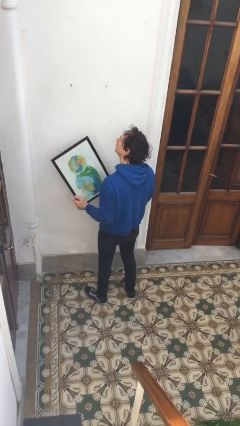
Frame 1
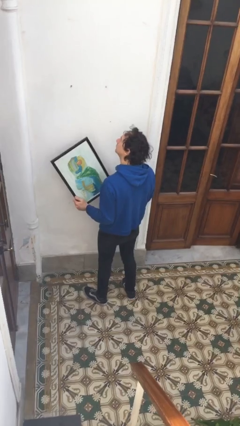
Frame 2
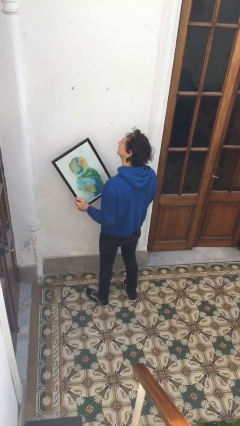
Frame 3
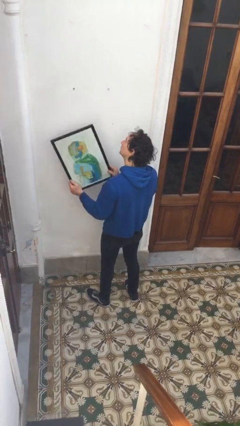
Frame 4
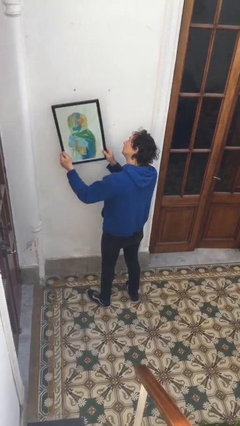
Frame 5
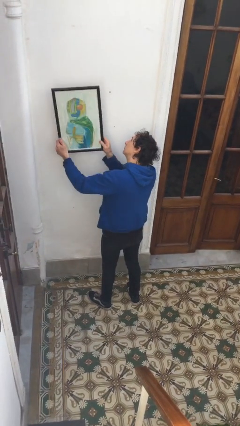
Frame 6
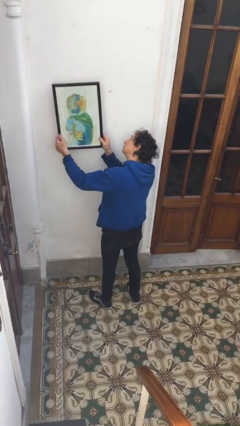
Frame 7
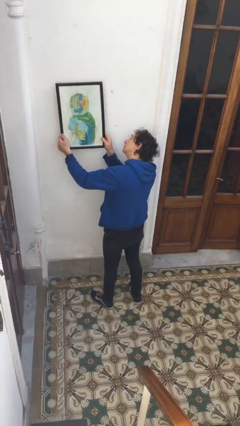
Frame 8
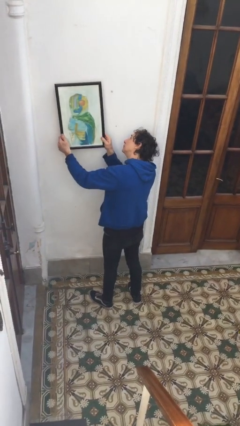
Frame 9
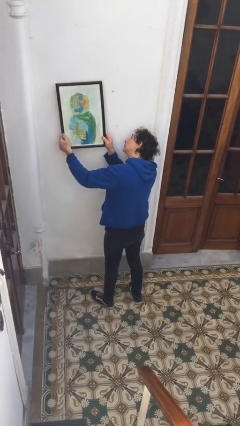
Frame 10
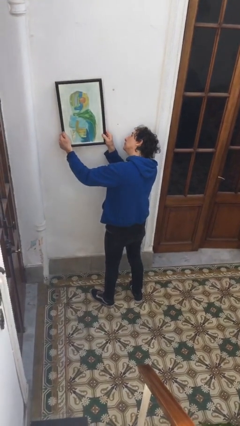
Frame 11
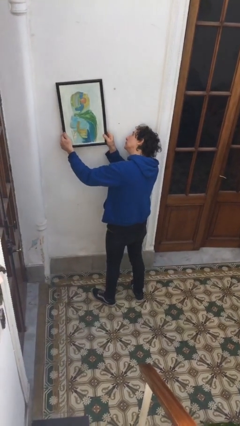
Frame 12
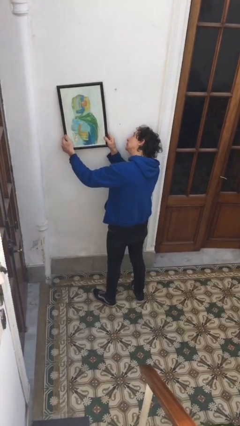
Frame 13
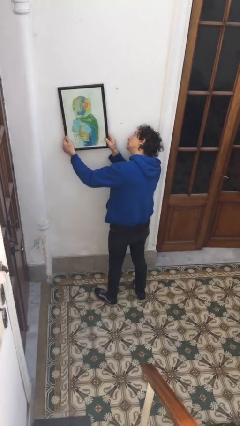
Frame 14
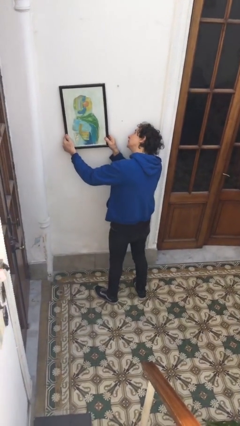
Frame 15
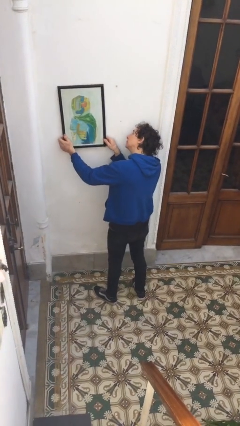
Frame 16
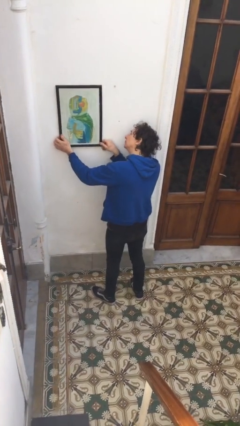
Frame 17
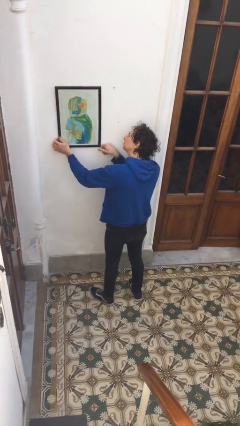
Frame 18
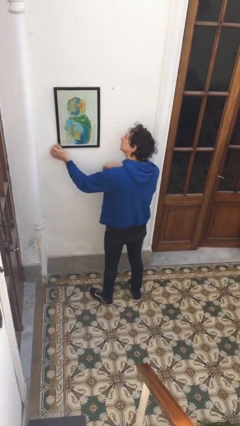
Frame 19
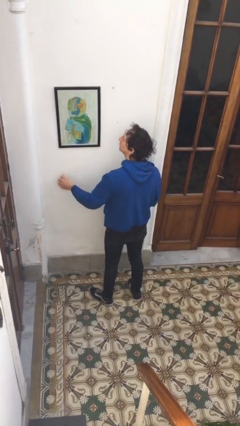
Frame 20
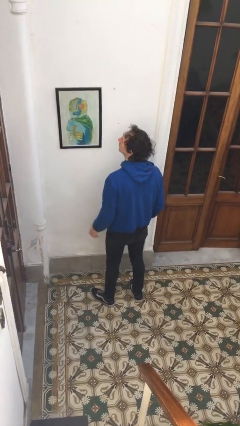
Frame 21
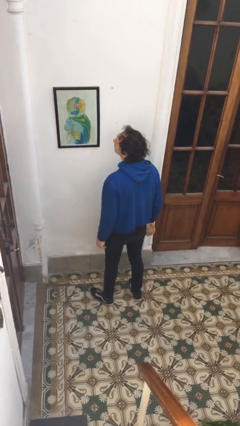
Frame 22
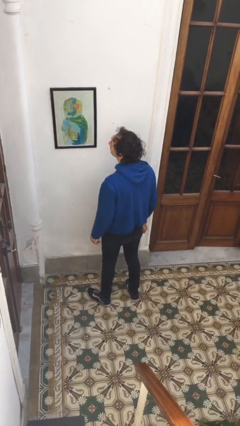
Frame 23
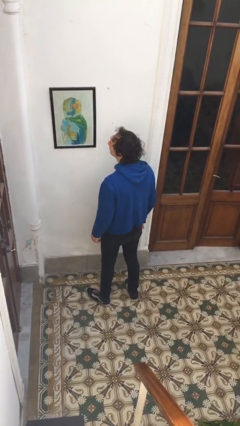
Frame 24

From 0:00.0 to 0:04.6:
person puts up picture frame

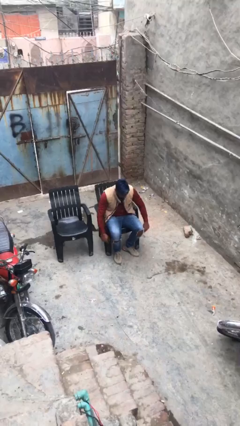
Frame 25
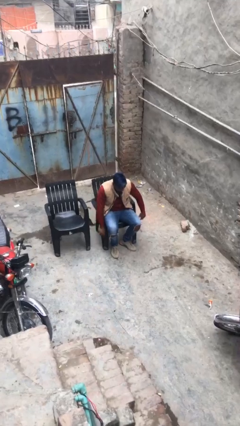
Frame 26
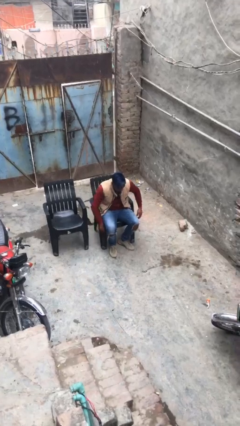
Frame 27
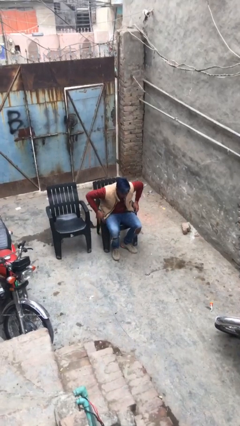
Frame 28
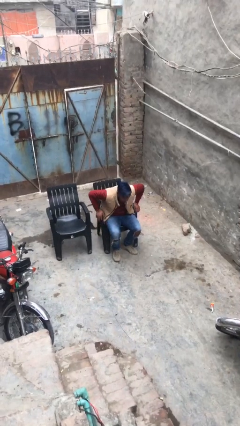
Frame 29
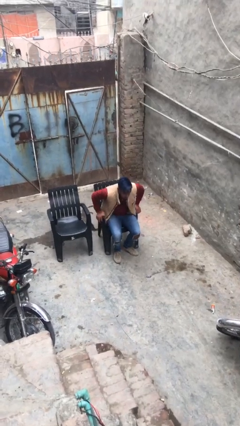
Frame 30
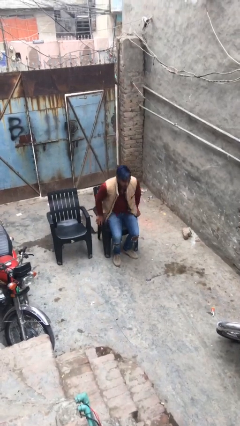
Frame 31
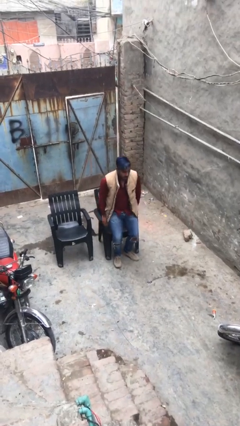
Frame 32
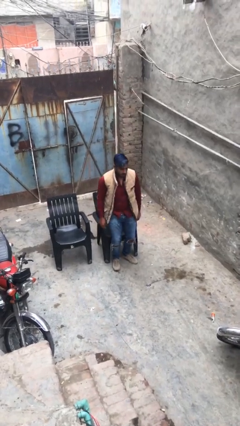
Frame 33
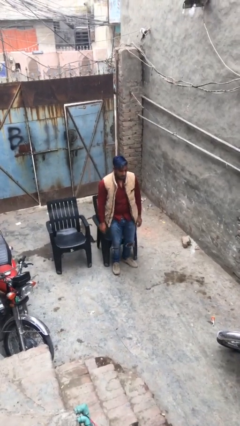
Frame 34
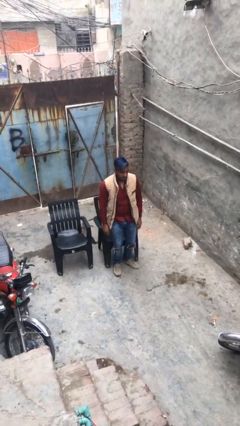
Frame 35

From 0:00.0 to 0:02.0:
person stands up

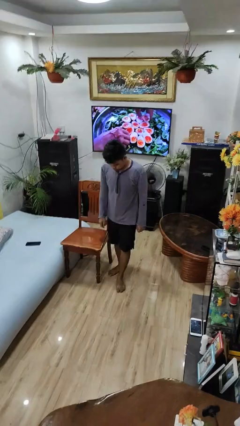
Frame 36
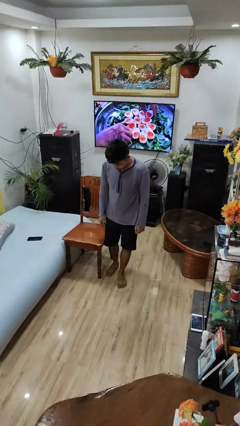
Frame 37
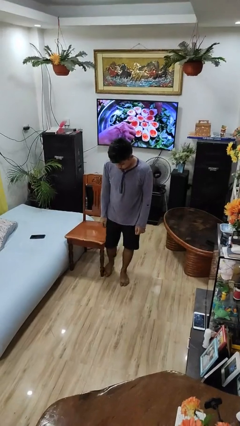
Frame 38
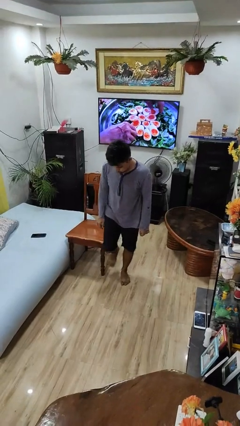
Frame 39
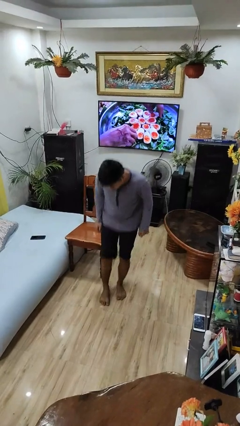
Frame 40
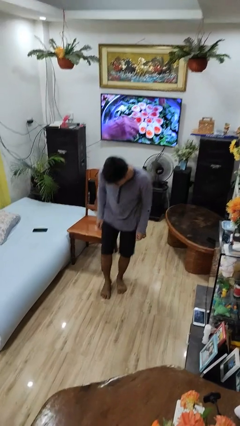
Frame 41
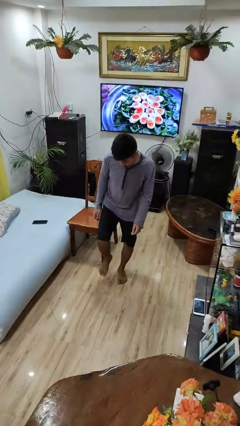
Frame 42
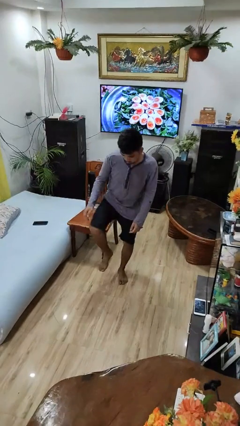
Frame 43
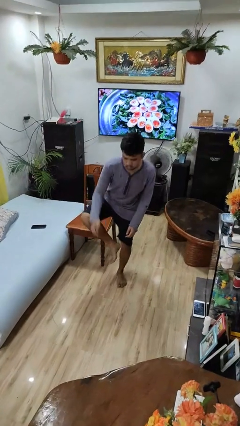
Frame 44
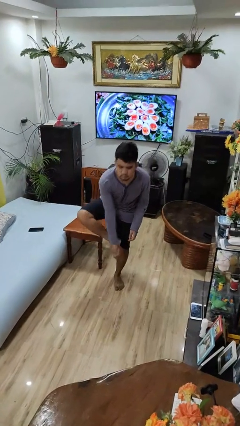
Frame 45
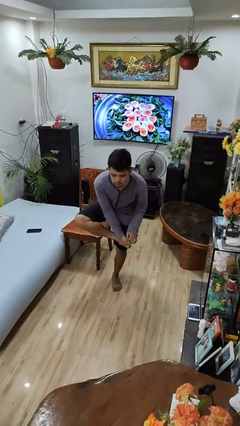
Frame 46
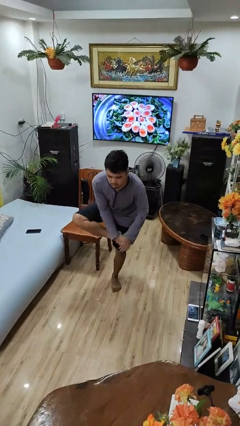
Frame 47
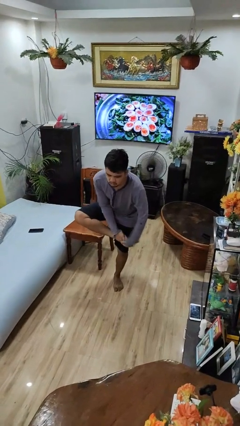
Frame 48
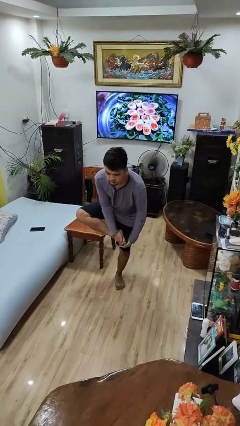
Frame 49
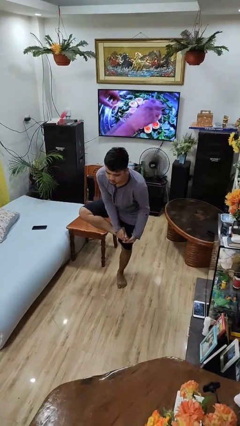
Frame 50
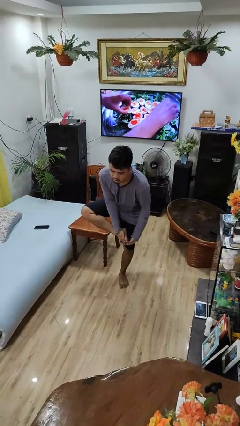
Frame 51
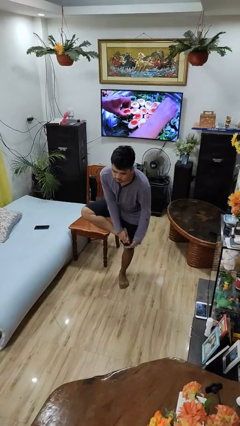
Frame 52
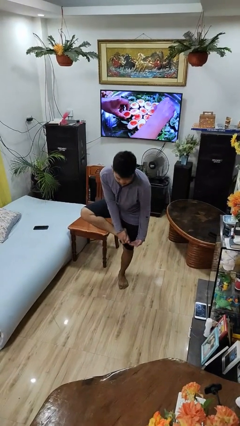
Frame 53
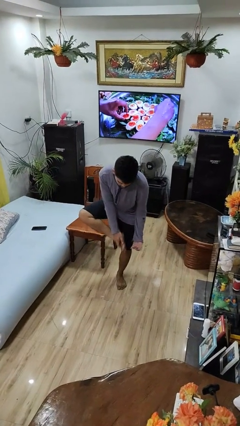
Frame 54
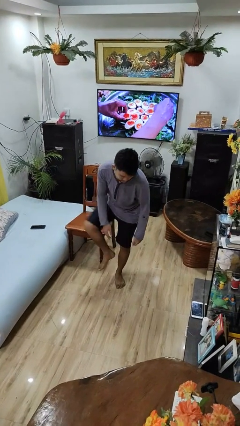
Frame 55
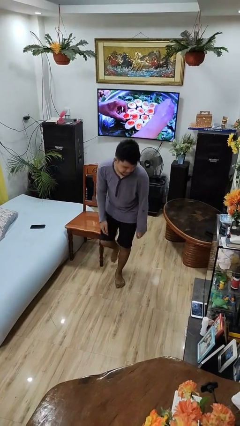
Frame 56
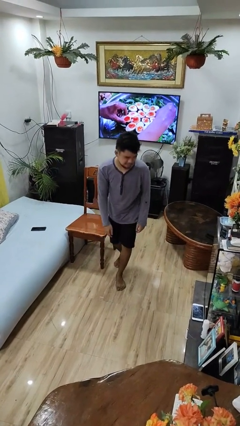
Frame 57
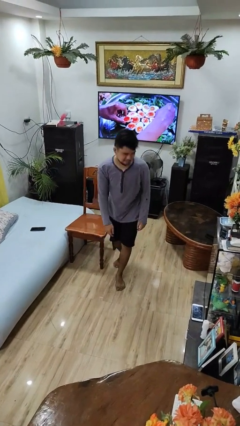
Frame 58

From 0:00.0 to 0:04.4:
person stubs toe

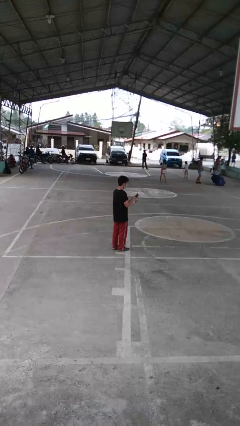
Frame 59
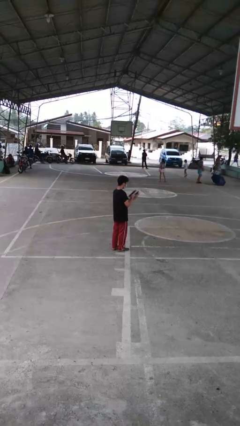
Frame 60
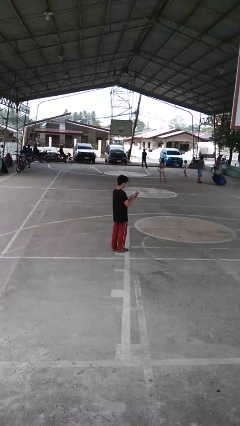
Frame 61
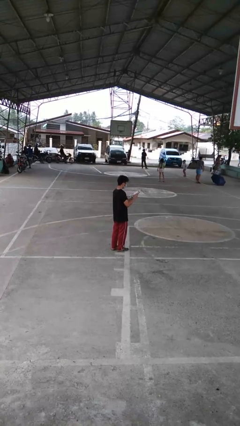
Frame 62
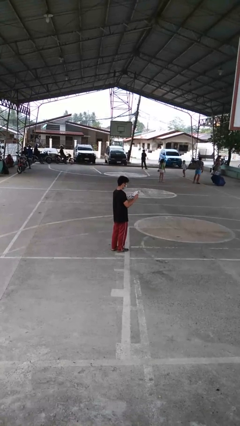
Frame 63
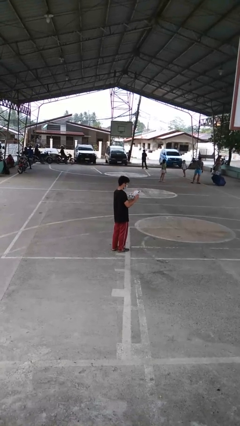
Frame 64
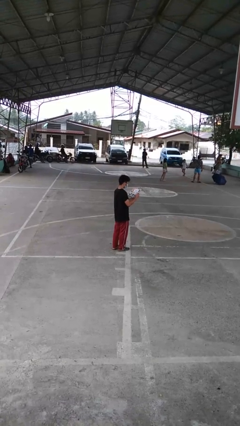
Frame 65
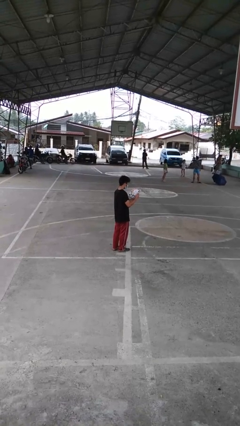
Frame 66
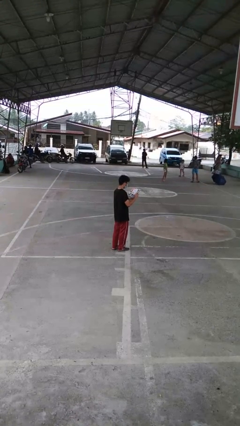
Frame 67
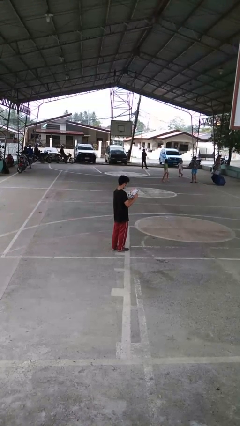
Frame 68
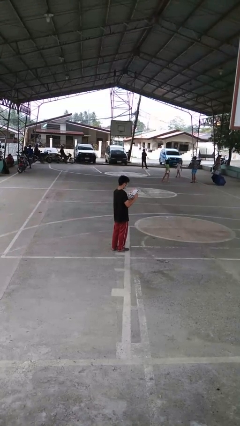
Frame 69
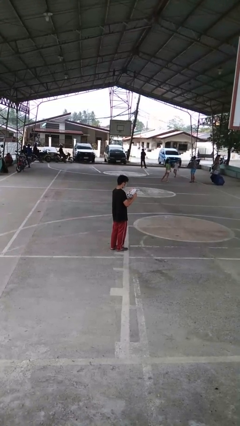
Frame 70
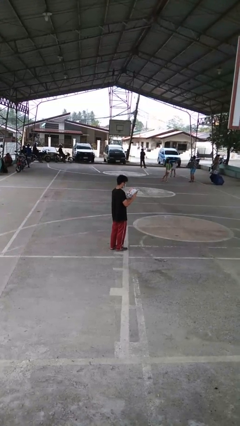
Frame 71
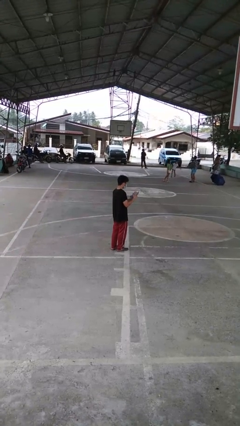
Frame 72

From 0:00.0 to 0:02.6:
person reads magazine

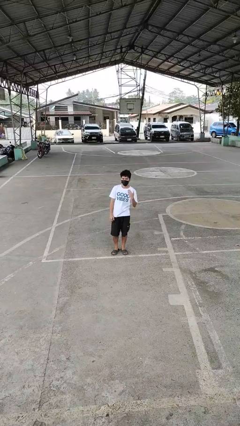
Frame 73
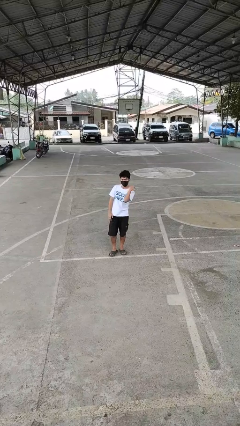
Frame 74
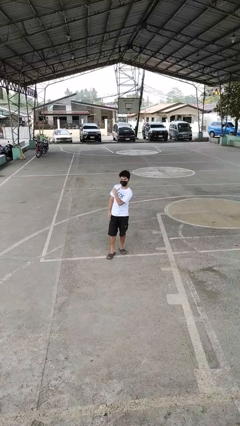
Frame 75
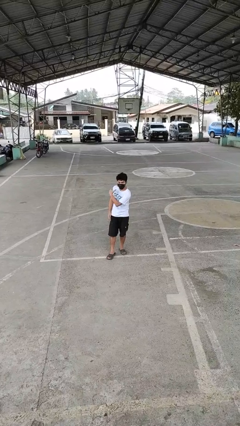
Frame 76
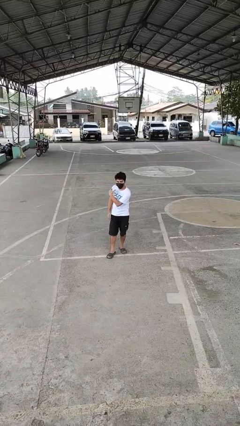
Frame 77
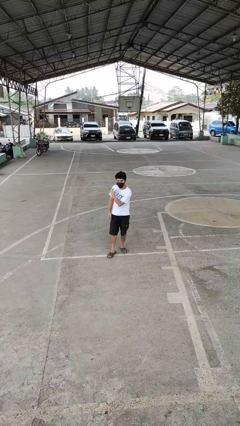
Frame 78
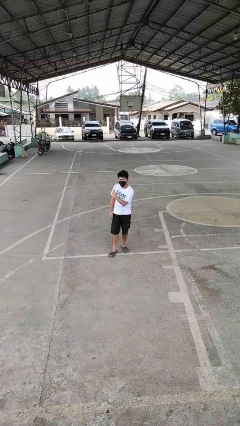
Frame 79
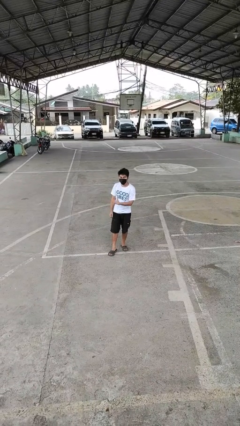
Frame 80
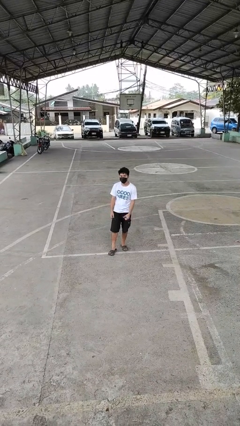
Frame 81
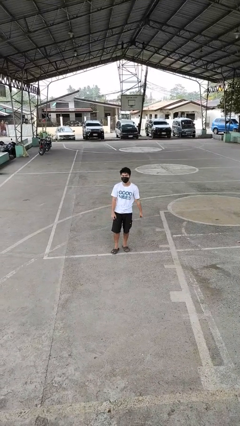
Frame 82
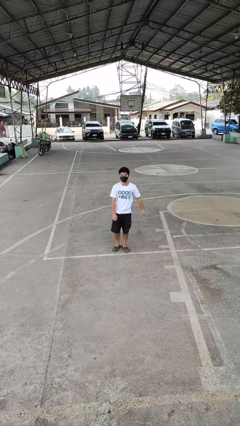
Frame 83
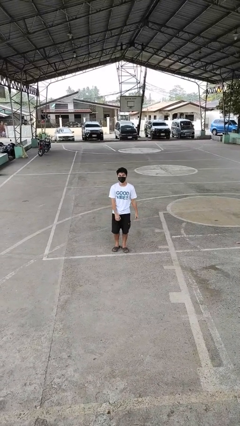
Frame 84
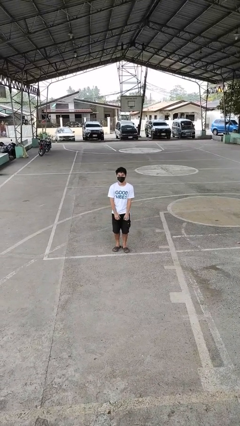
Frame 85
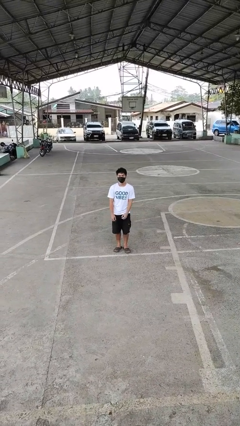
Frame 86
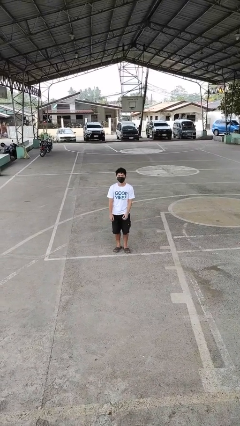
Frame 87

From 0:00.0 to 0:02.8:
person gestures cut

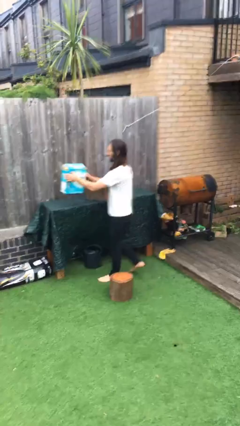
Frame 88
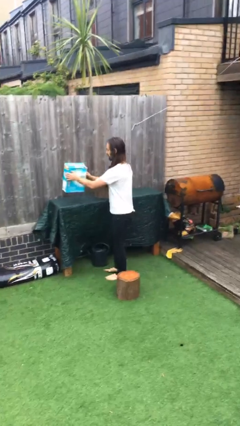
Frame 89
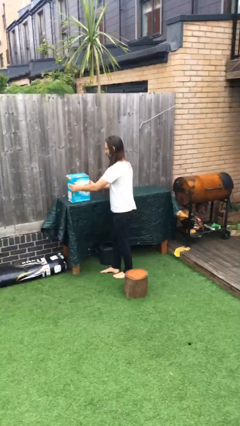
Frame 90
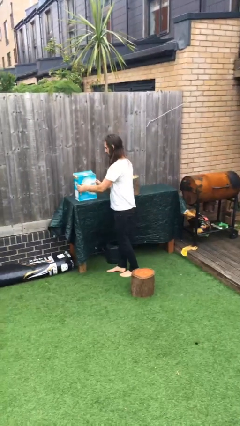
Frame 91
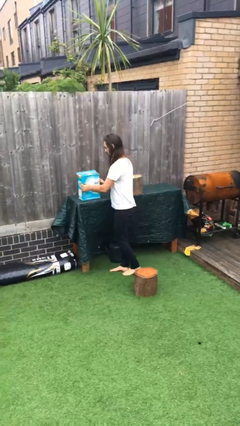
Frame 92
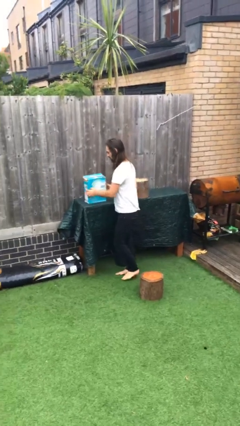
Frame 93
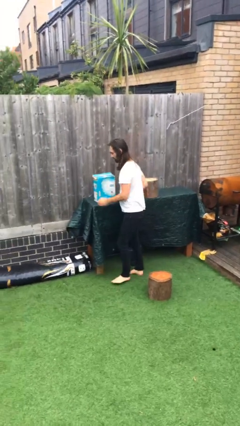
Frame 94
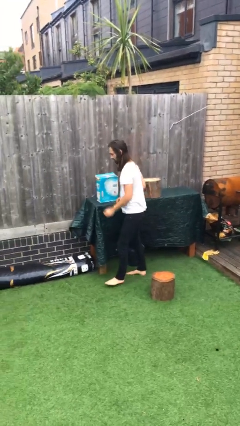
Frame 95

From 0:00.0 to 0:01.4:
person puts down object on table
